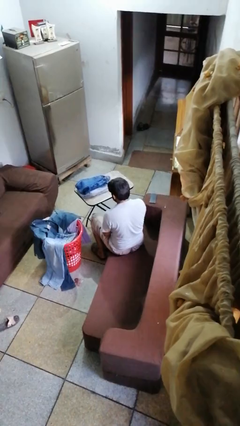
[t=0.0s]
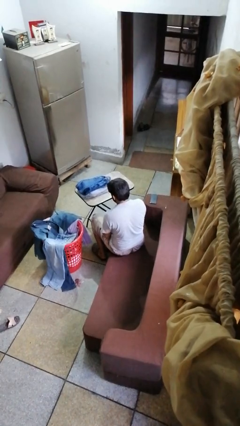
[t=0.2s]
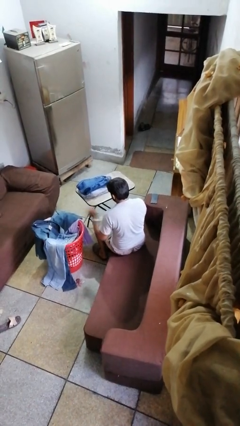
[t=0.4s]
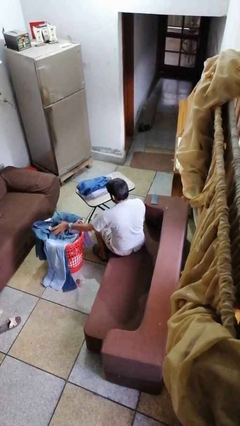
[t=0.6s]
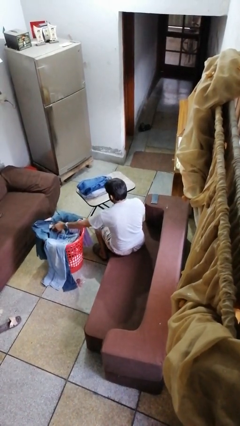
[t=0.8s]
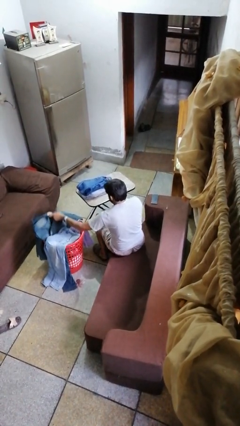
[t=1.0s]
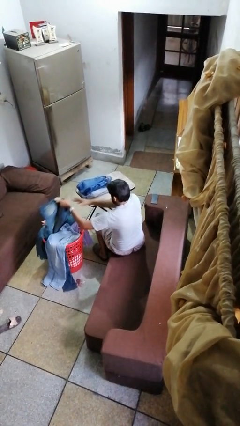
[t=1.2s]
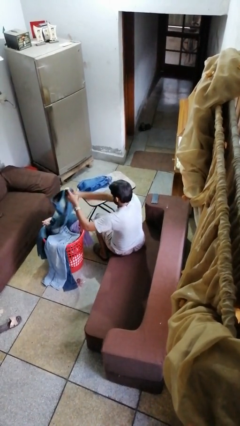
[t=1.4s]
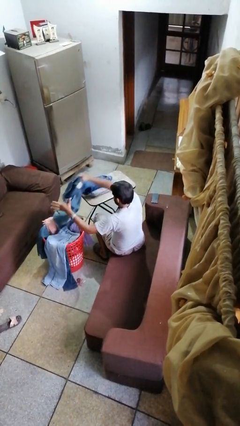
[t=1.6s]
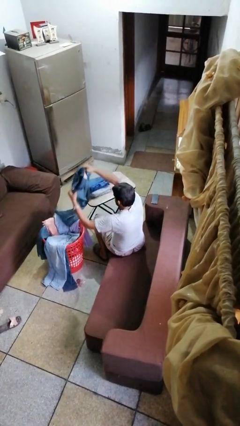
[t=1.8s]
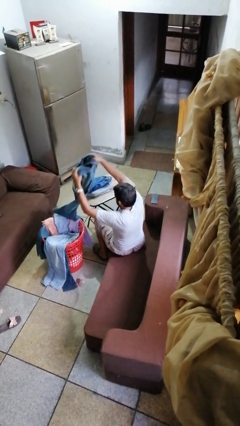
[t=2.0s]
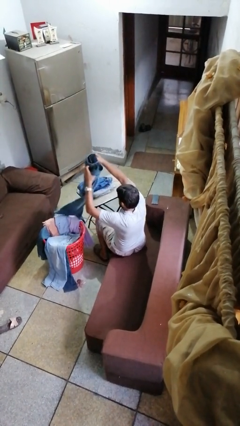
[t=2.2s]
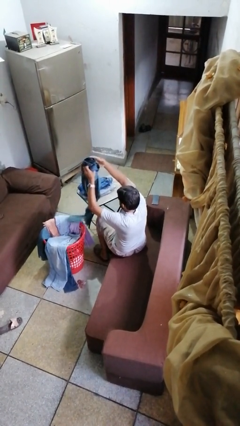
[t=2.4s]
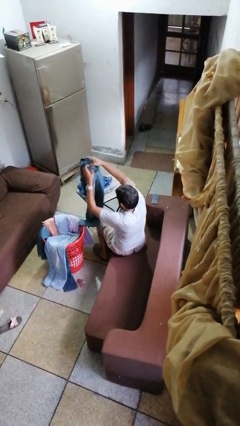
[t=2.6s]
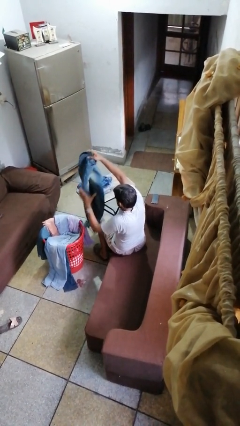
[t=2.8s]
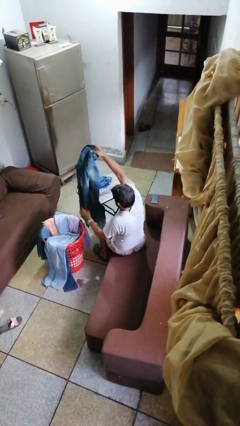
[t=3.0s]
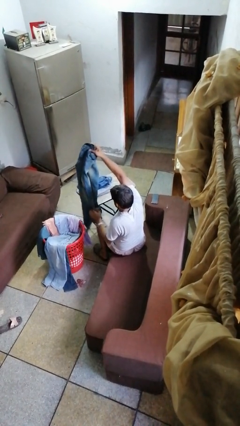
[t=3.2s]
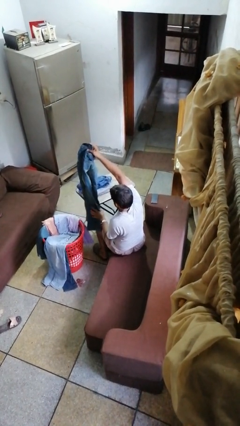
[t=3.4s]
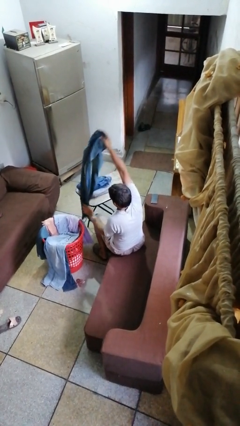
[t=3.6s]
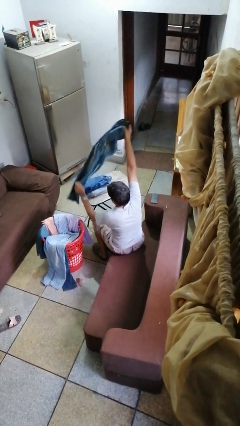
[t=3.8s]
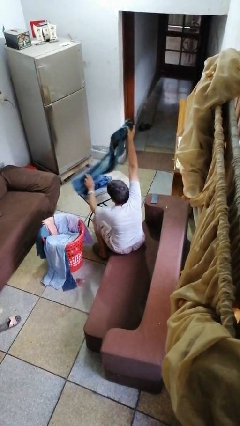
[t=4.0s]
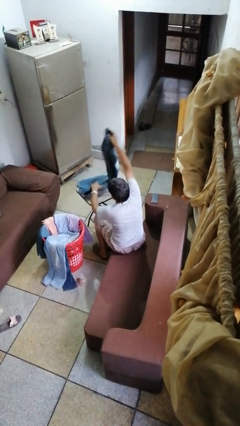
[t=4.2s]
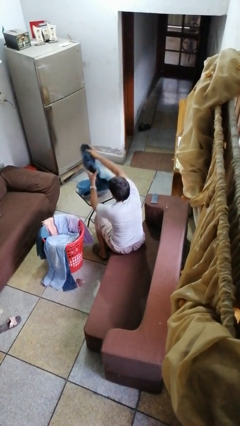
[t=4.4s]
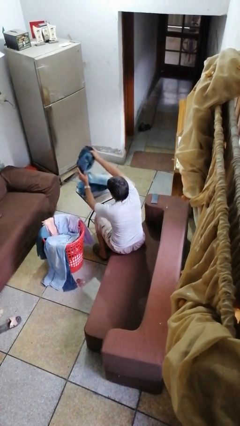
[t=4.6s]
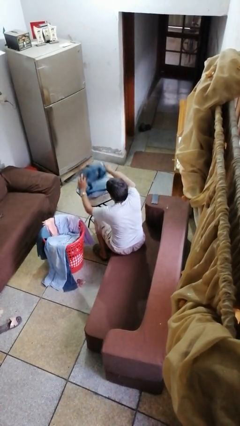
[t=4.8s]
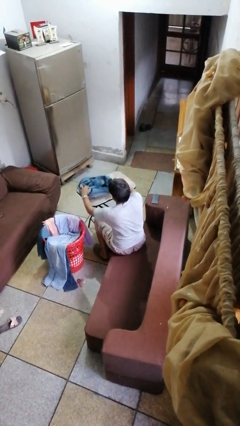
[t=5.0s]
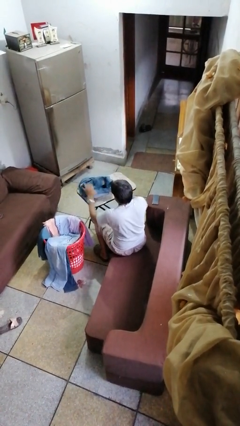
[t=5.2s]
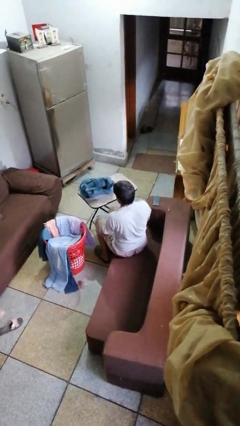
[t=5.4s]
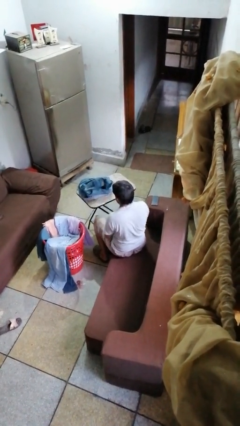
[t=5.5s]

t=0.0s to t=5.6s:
person folds pants

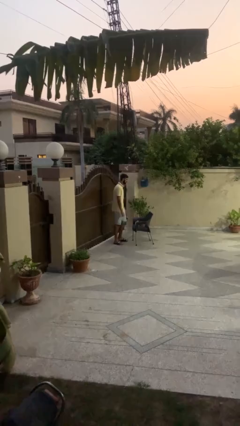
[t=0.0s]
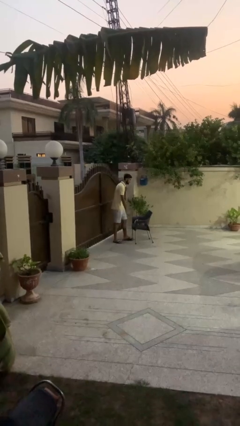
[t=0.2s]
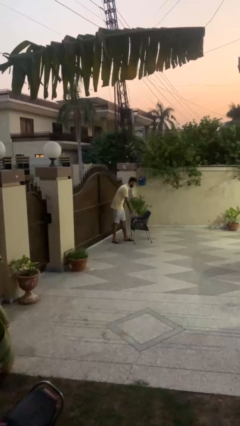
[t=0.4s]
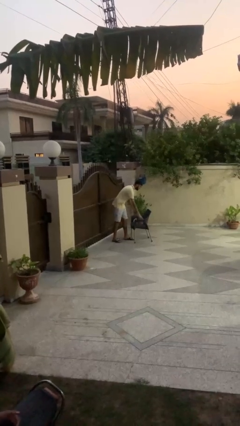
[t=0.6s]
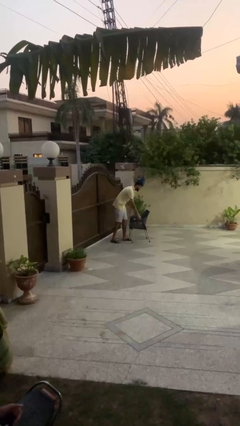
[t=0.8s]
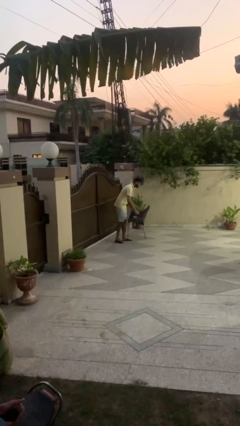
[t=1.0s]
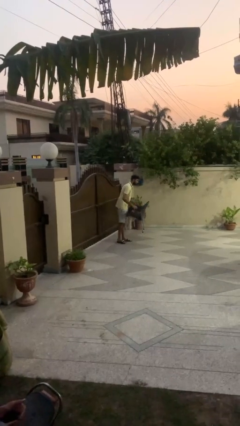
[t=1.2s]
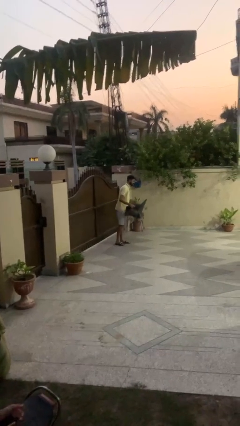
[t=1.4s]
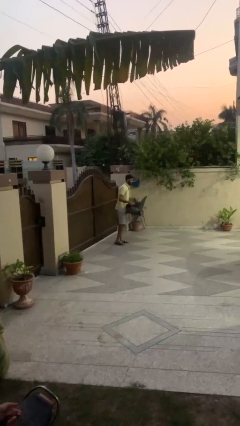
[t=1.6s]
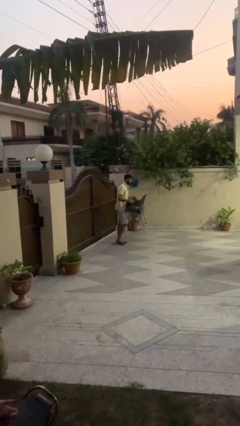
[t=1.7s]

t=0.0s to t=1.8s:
person picks up object from floor

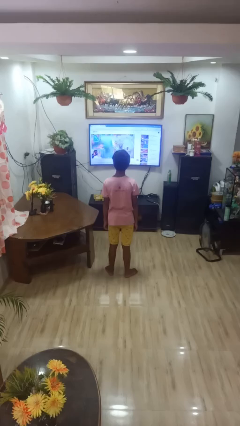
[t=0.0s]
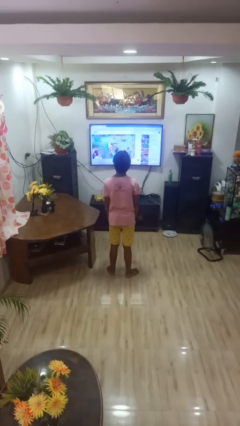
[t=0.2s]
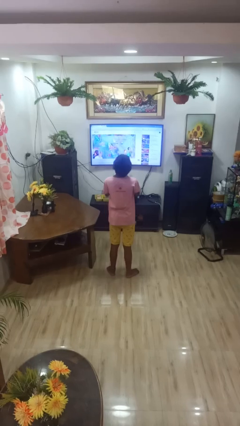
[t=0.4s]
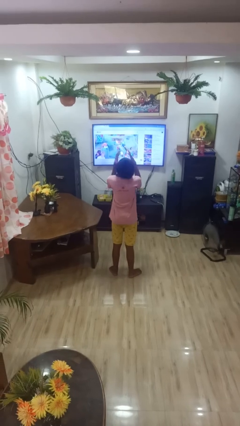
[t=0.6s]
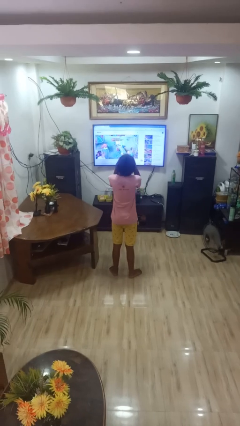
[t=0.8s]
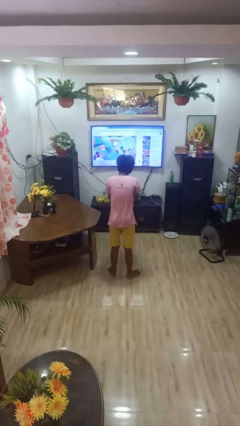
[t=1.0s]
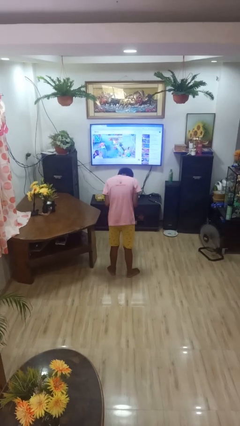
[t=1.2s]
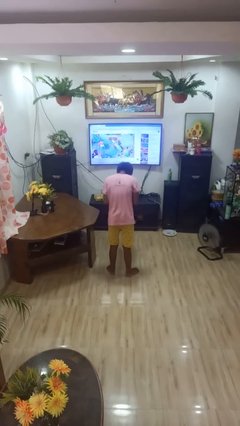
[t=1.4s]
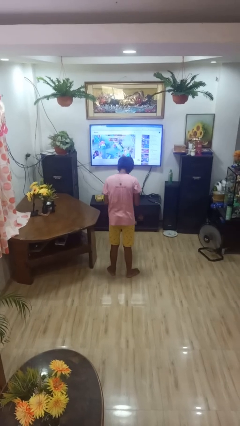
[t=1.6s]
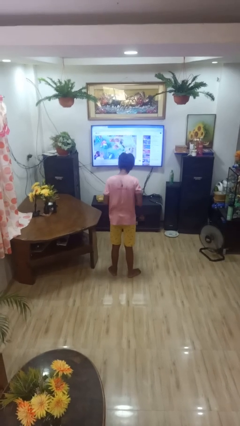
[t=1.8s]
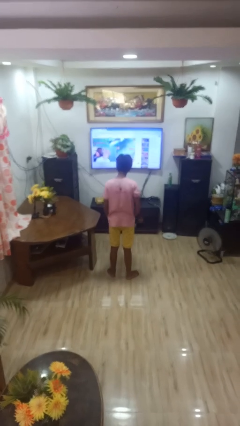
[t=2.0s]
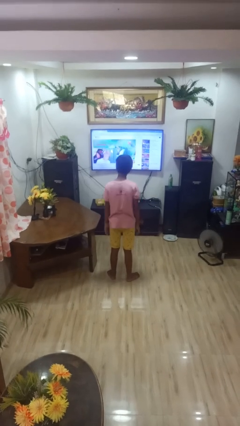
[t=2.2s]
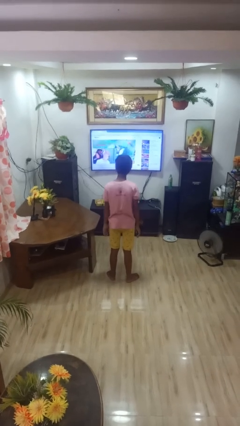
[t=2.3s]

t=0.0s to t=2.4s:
person sneezes into hand

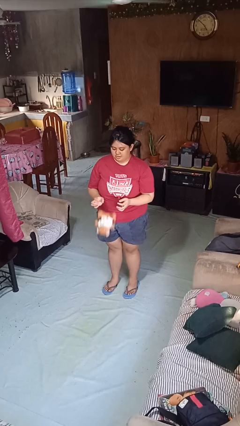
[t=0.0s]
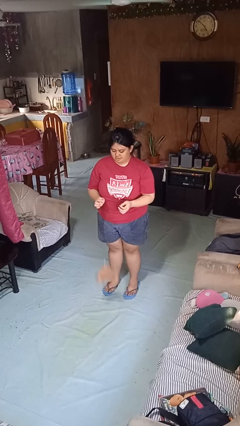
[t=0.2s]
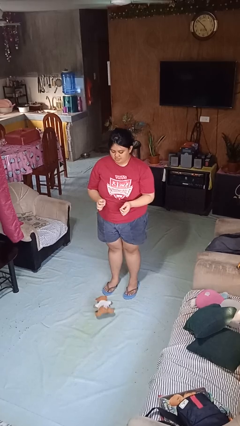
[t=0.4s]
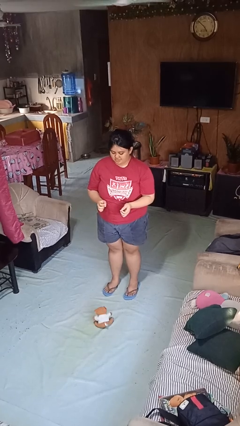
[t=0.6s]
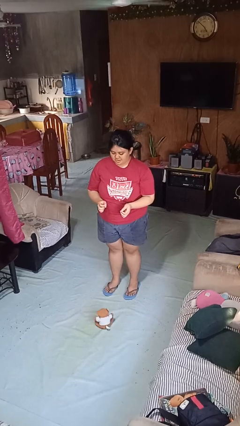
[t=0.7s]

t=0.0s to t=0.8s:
person drops object

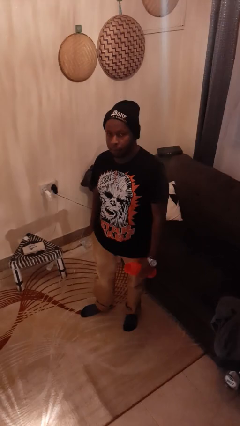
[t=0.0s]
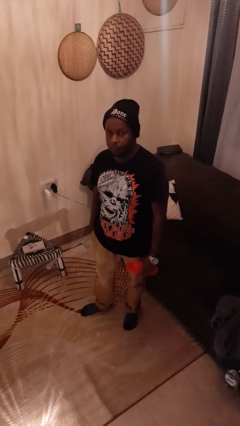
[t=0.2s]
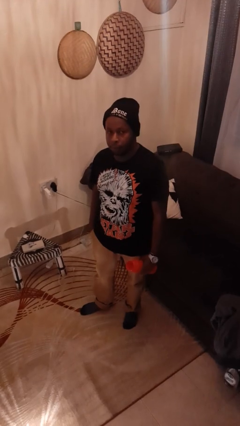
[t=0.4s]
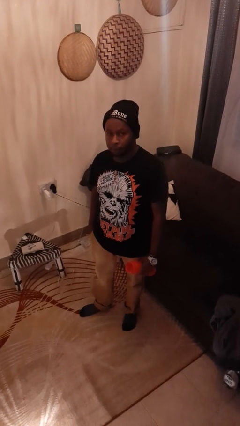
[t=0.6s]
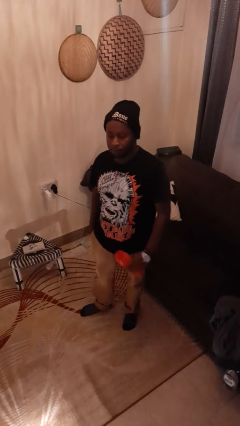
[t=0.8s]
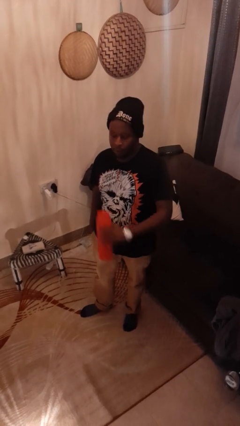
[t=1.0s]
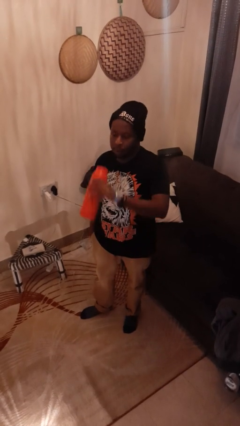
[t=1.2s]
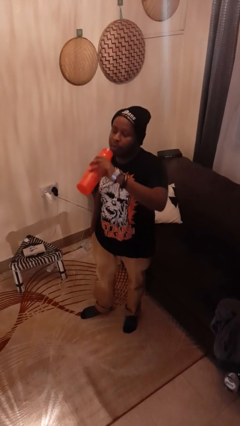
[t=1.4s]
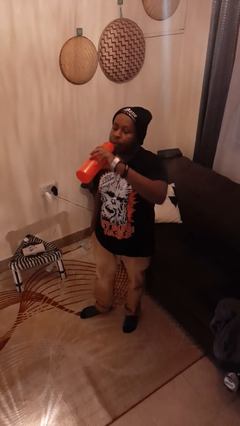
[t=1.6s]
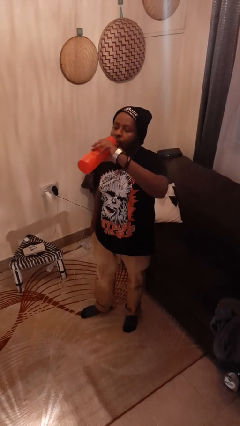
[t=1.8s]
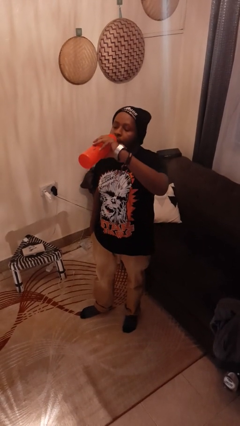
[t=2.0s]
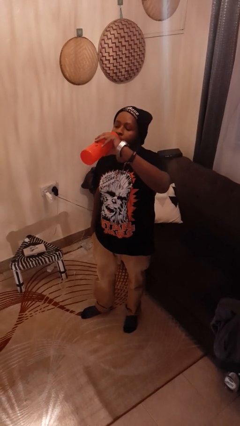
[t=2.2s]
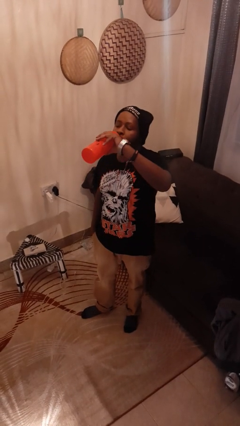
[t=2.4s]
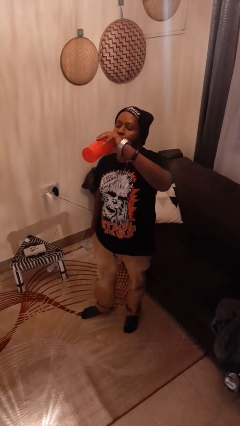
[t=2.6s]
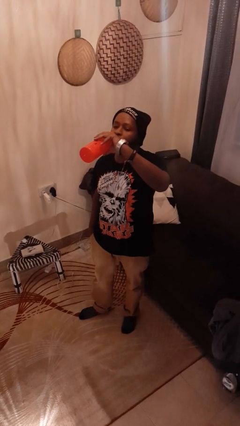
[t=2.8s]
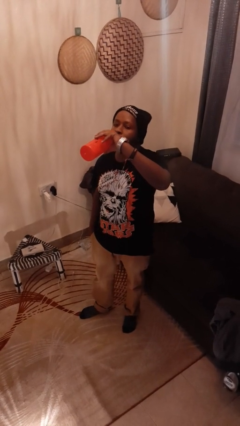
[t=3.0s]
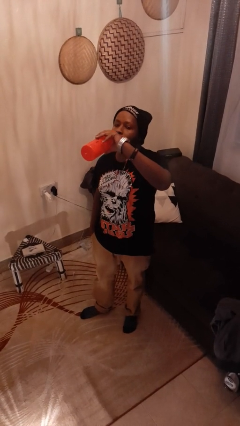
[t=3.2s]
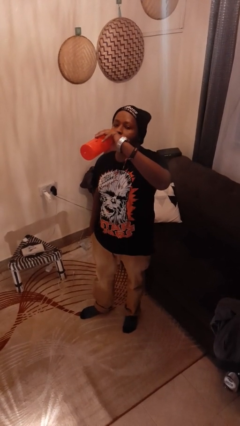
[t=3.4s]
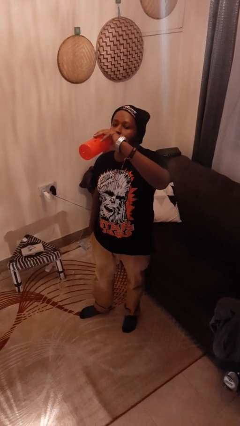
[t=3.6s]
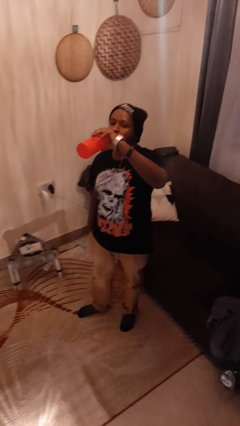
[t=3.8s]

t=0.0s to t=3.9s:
person drinks from bottle

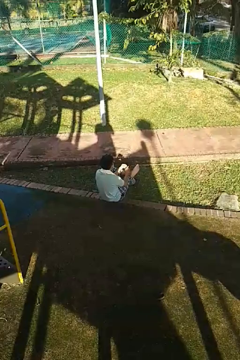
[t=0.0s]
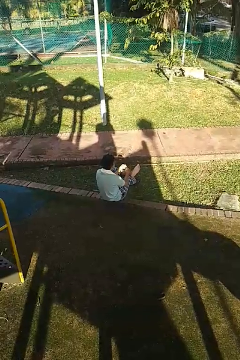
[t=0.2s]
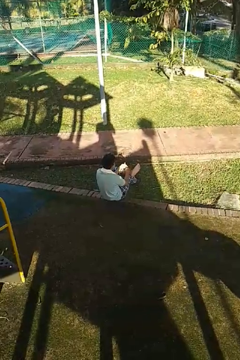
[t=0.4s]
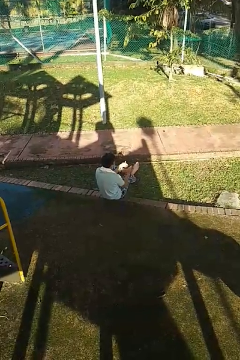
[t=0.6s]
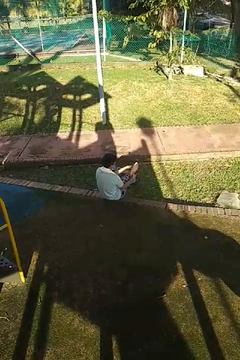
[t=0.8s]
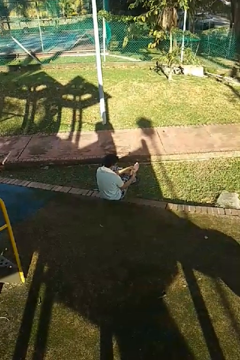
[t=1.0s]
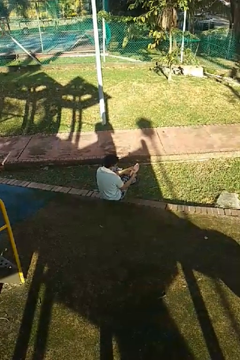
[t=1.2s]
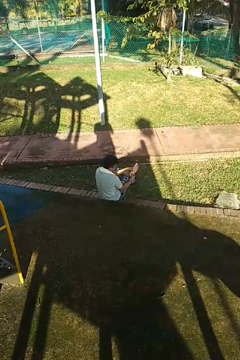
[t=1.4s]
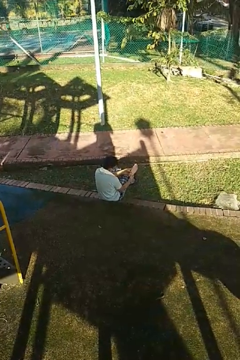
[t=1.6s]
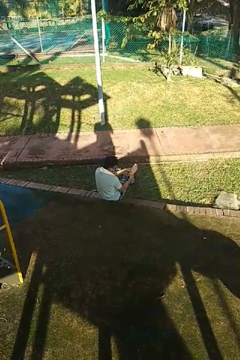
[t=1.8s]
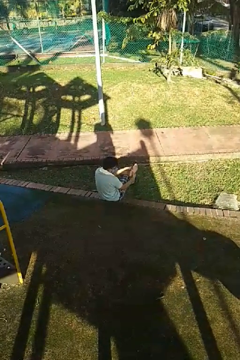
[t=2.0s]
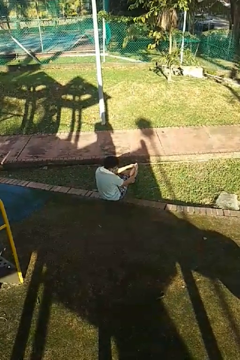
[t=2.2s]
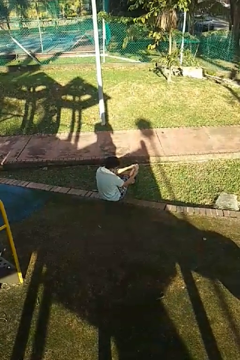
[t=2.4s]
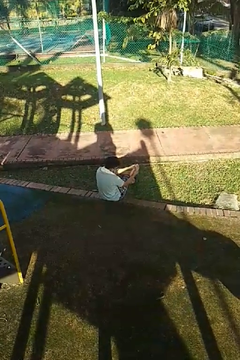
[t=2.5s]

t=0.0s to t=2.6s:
person rubs foot

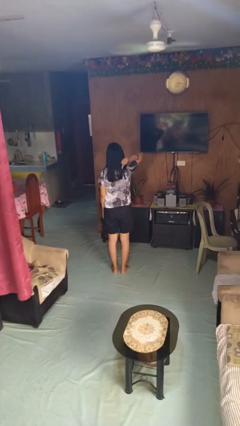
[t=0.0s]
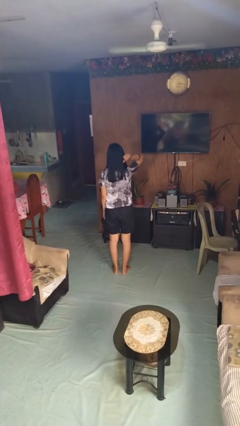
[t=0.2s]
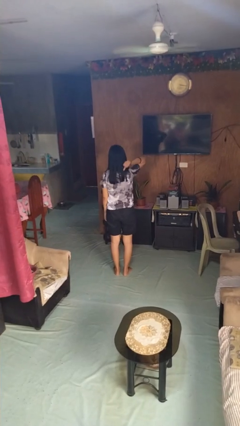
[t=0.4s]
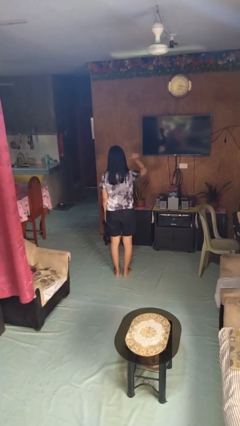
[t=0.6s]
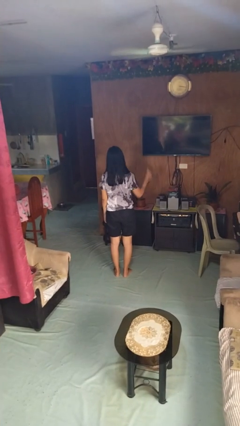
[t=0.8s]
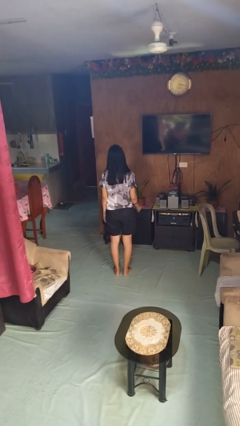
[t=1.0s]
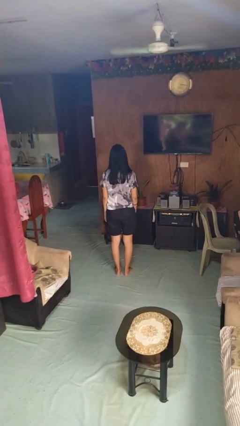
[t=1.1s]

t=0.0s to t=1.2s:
person gestures behind me
